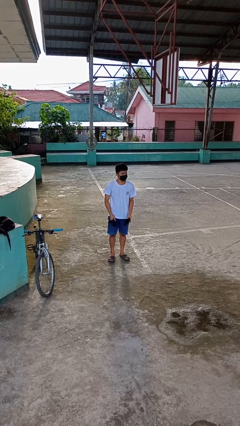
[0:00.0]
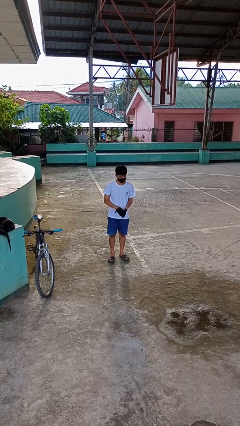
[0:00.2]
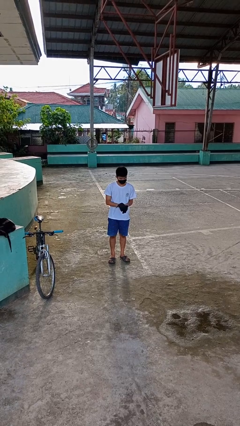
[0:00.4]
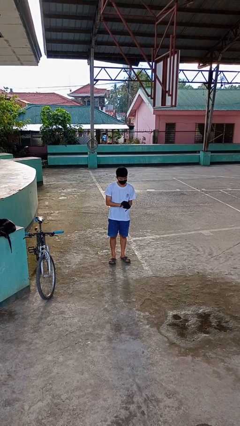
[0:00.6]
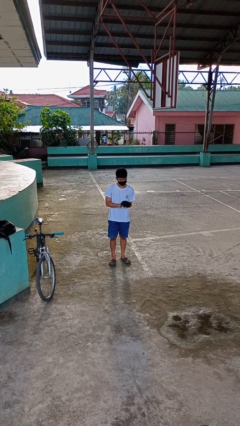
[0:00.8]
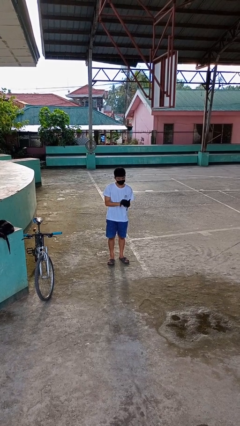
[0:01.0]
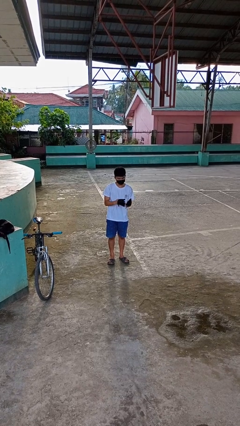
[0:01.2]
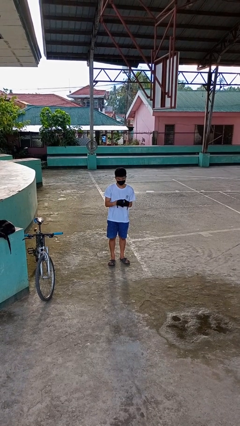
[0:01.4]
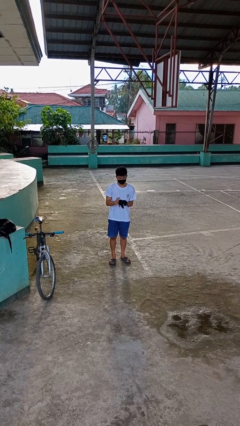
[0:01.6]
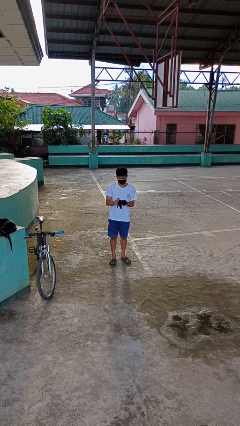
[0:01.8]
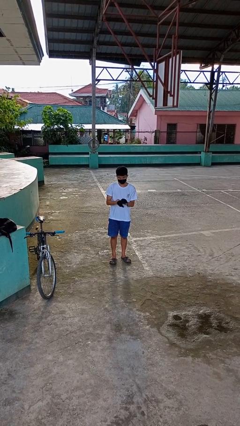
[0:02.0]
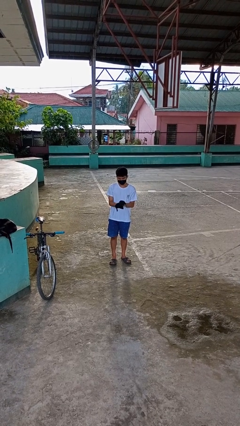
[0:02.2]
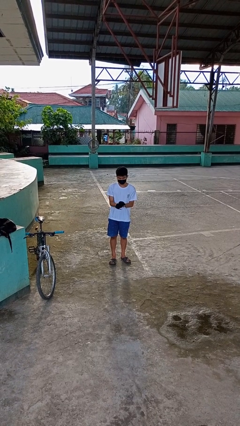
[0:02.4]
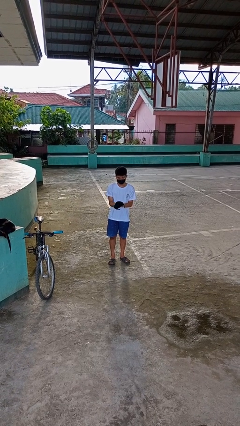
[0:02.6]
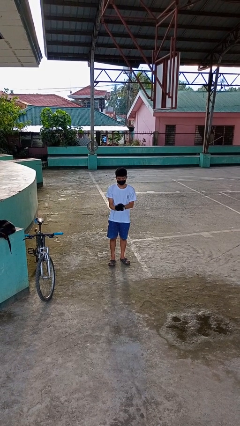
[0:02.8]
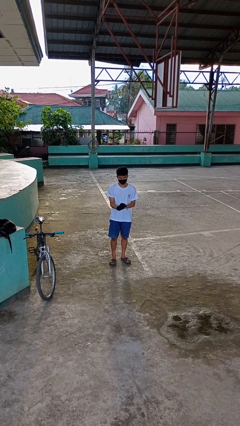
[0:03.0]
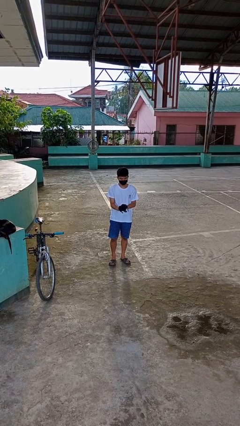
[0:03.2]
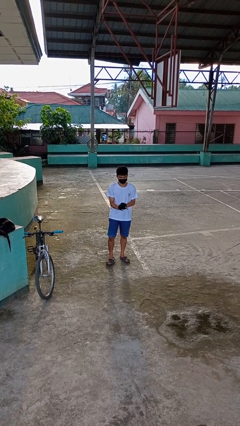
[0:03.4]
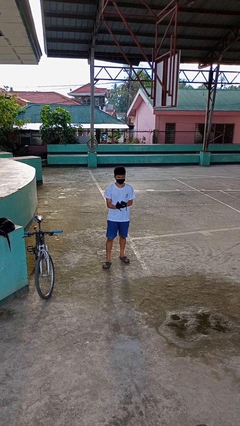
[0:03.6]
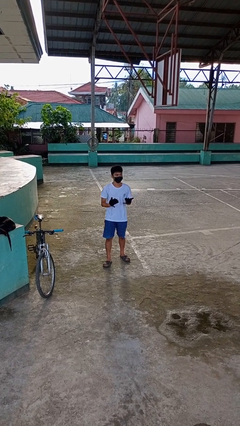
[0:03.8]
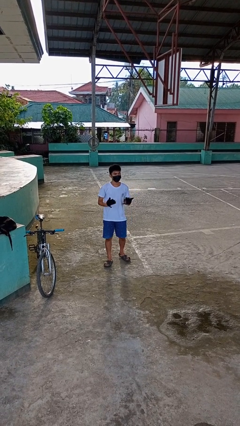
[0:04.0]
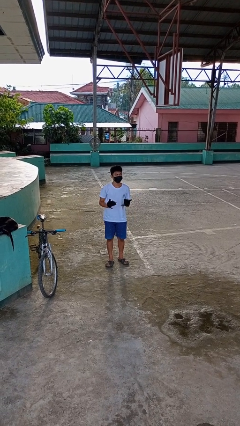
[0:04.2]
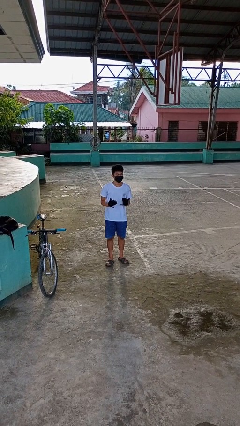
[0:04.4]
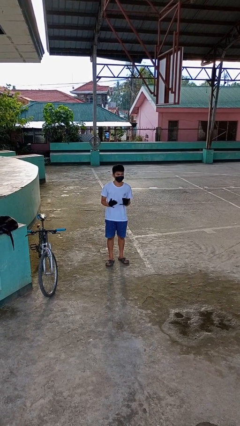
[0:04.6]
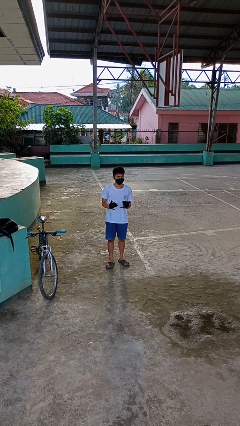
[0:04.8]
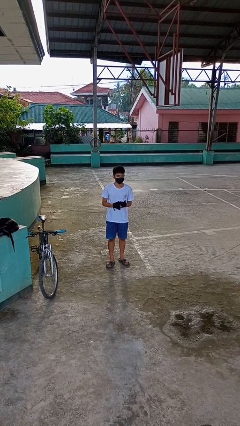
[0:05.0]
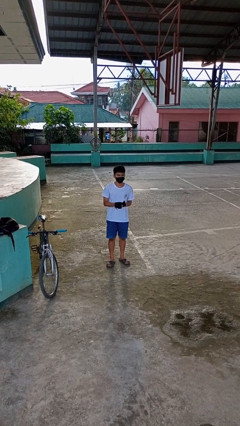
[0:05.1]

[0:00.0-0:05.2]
person puts on gloves

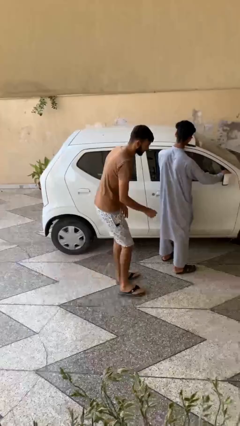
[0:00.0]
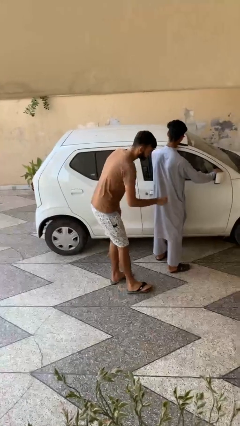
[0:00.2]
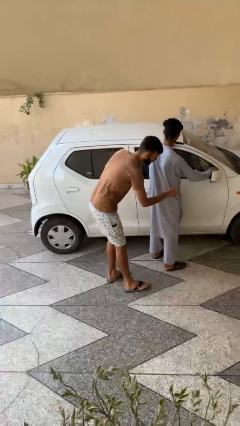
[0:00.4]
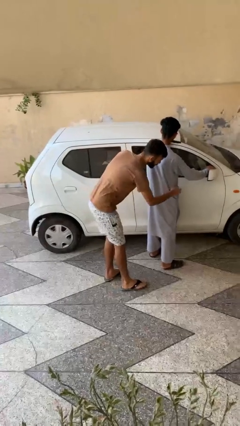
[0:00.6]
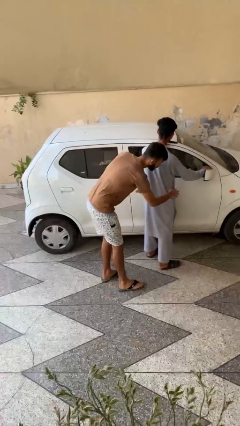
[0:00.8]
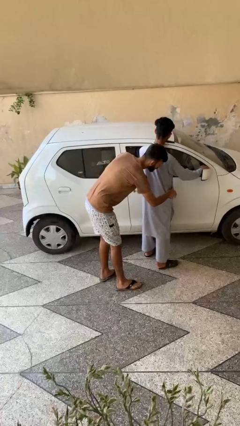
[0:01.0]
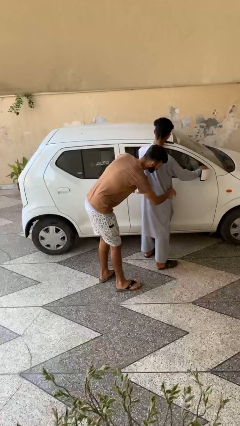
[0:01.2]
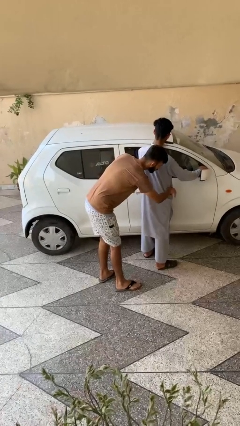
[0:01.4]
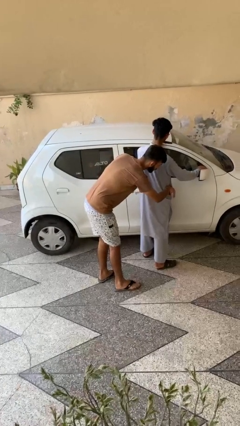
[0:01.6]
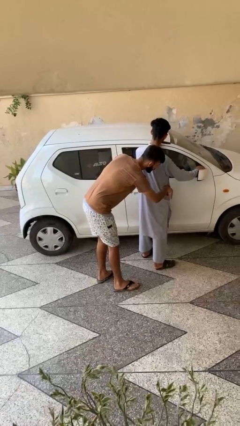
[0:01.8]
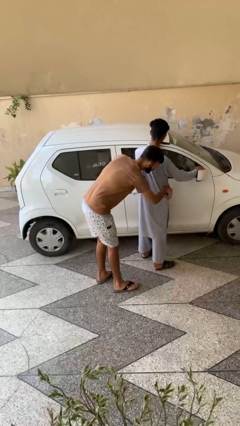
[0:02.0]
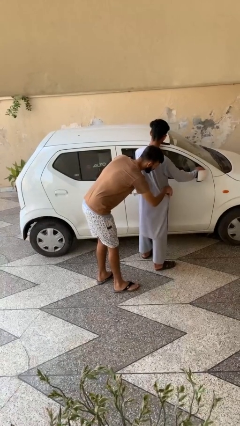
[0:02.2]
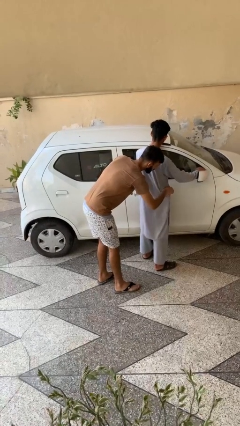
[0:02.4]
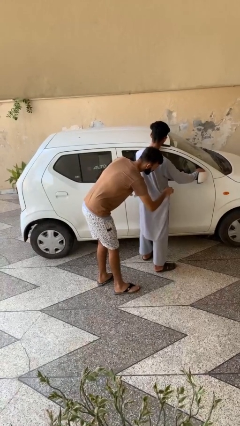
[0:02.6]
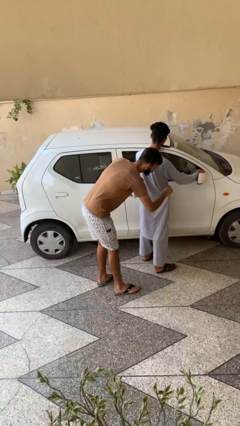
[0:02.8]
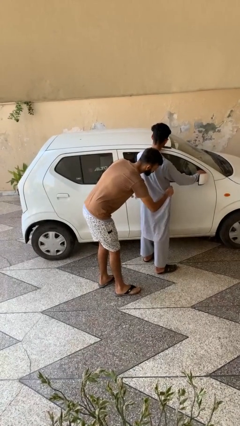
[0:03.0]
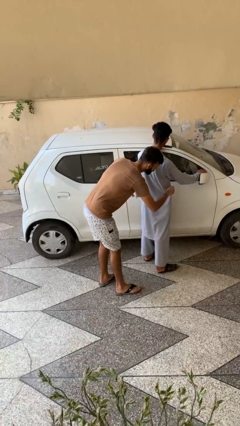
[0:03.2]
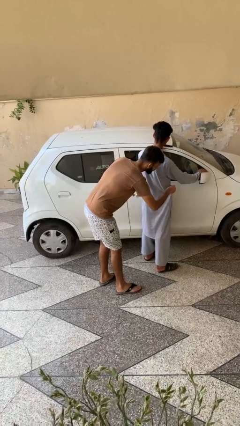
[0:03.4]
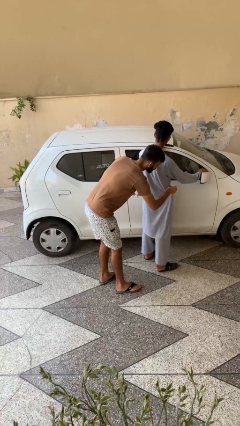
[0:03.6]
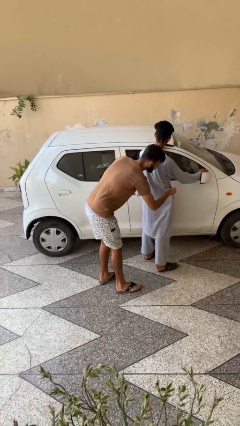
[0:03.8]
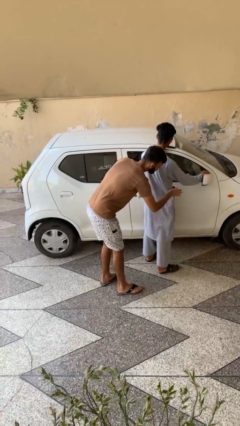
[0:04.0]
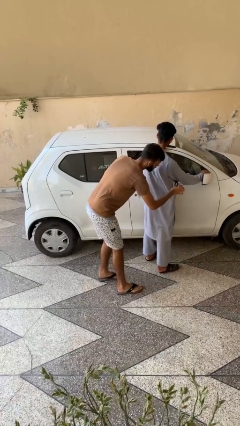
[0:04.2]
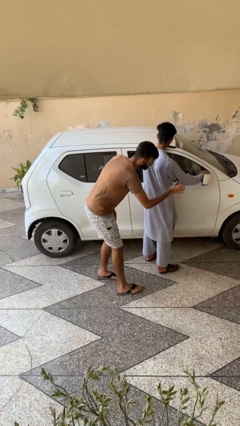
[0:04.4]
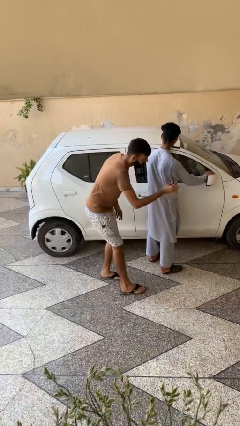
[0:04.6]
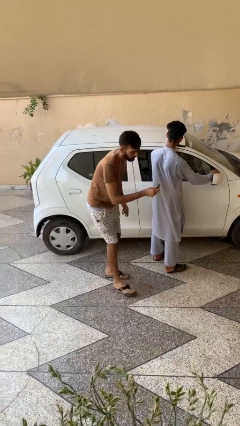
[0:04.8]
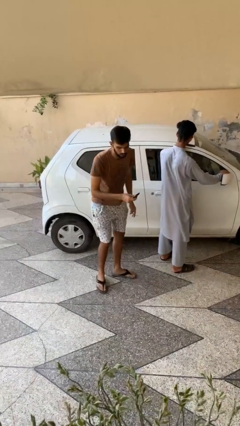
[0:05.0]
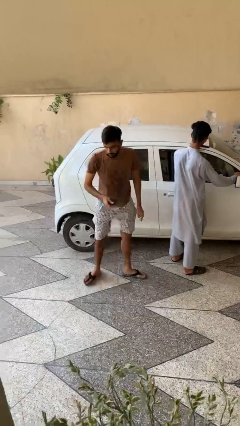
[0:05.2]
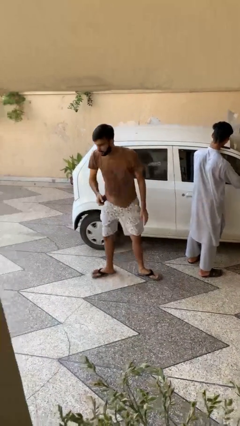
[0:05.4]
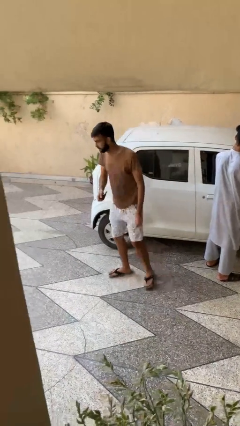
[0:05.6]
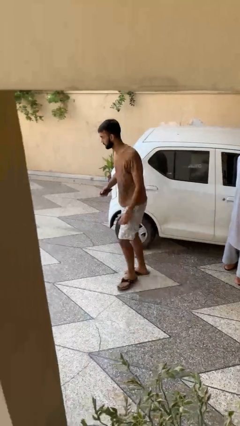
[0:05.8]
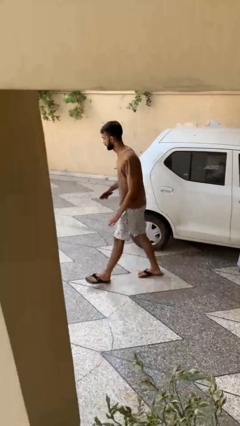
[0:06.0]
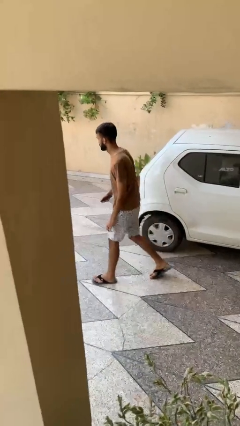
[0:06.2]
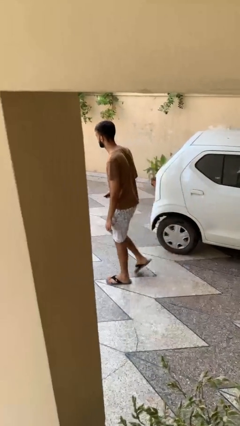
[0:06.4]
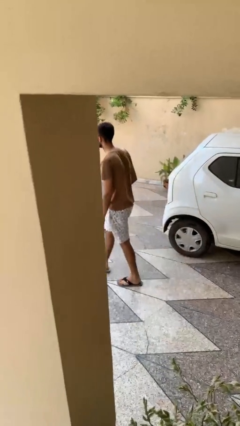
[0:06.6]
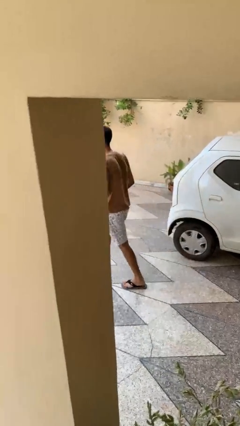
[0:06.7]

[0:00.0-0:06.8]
person steals object from person

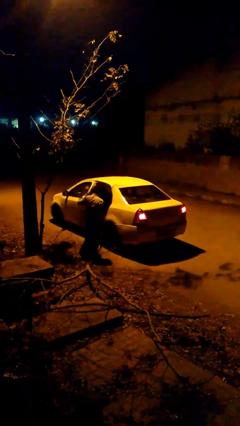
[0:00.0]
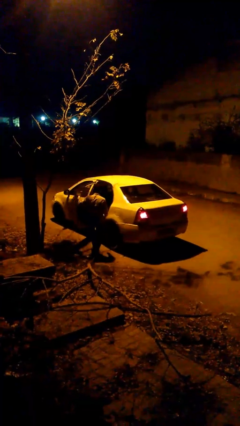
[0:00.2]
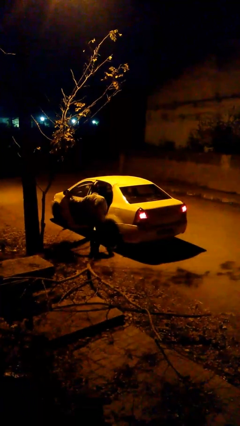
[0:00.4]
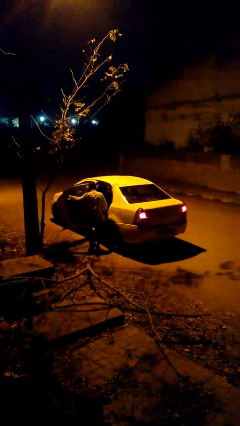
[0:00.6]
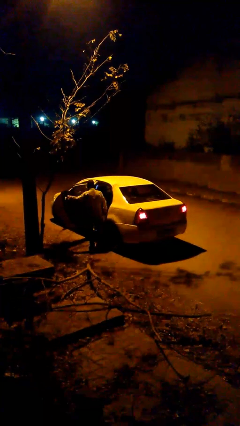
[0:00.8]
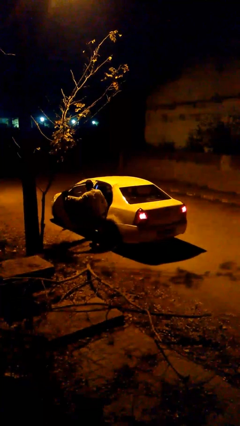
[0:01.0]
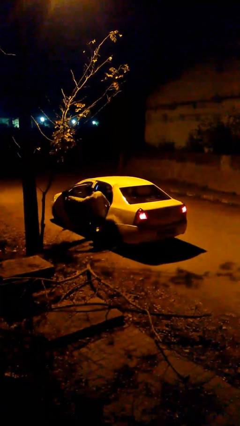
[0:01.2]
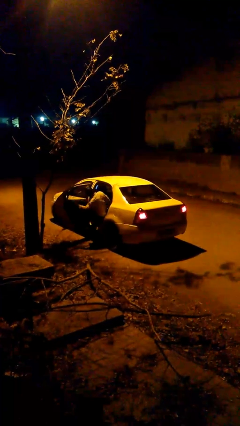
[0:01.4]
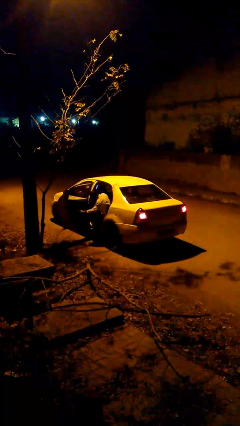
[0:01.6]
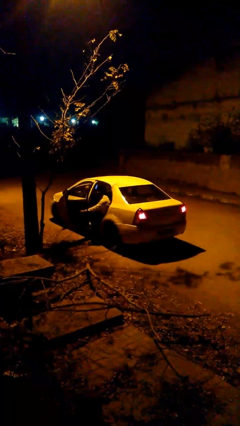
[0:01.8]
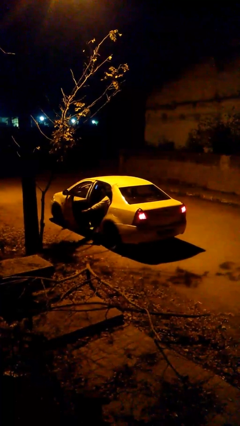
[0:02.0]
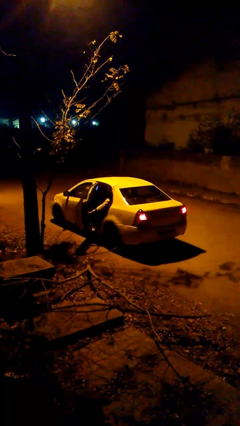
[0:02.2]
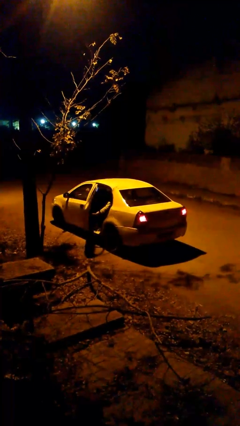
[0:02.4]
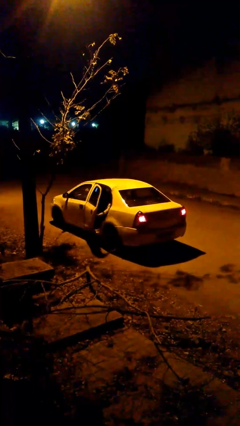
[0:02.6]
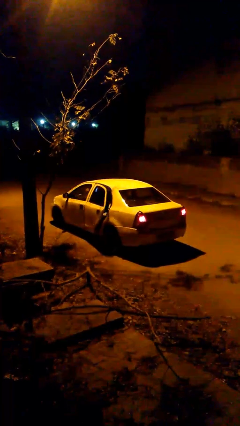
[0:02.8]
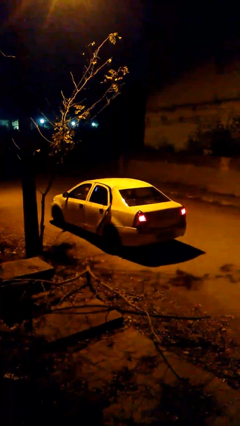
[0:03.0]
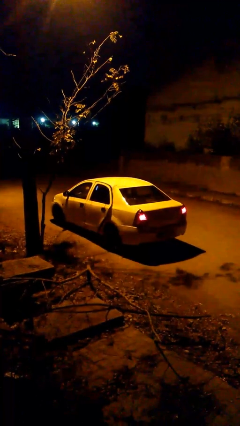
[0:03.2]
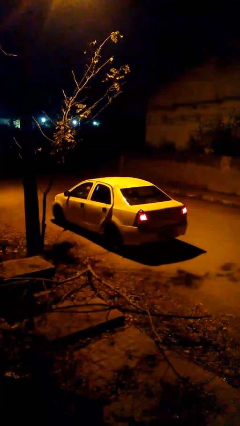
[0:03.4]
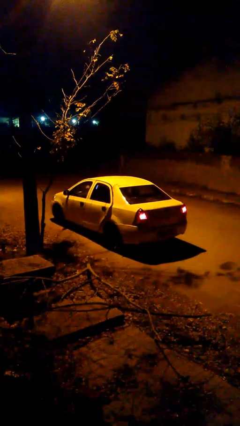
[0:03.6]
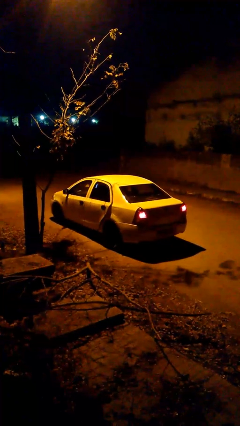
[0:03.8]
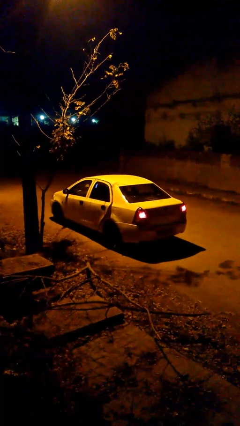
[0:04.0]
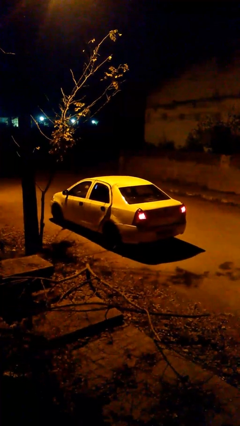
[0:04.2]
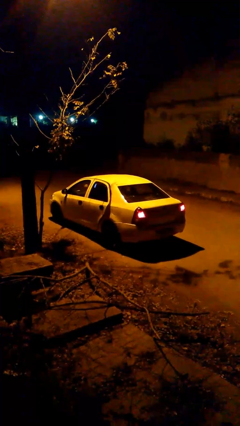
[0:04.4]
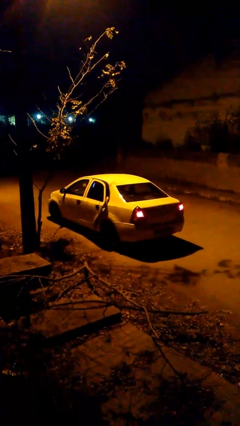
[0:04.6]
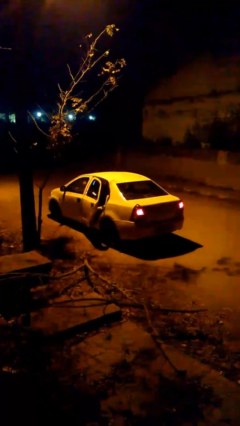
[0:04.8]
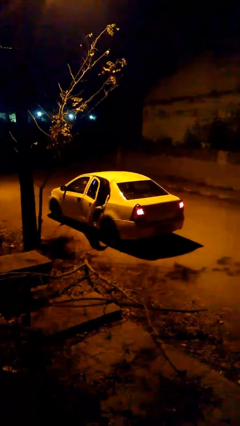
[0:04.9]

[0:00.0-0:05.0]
car picks up person

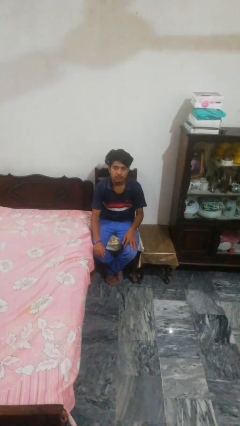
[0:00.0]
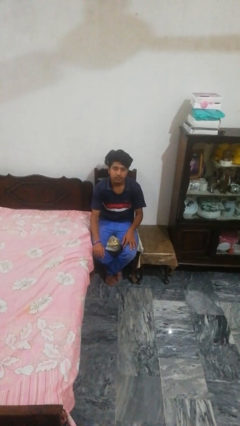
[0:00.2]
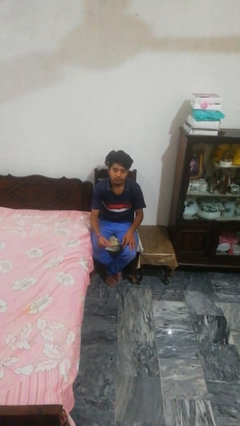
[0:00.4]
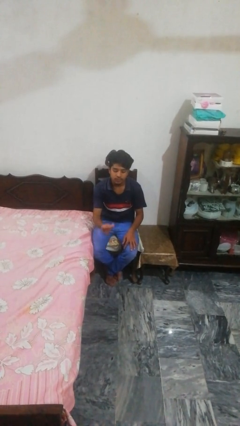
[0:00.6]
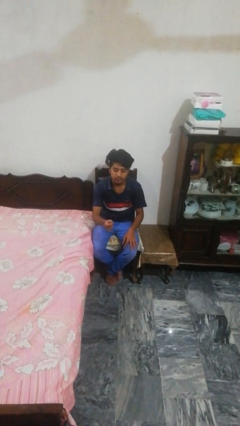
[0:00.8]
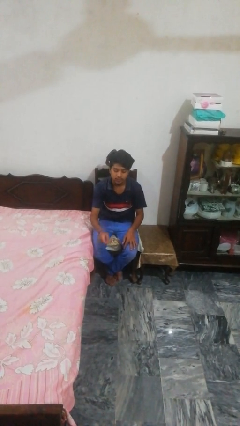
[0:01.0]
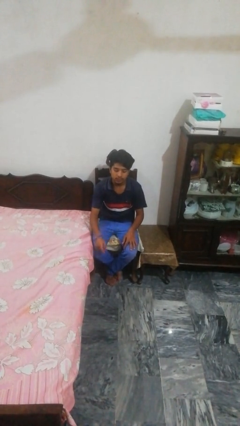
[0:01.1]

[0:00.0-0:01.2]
person snaps fingers
